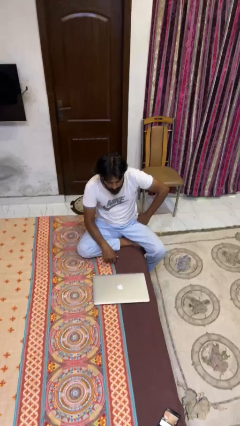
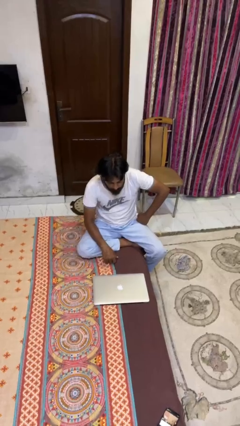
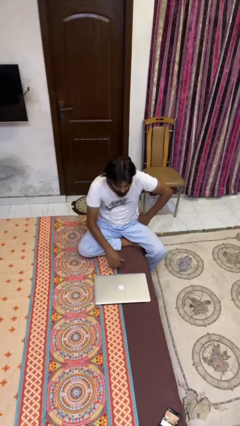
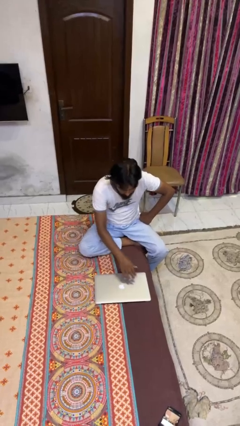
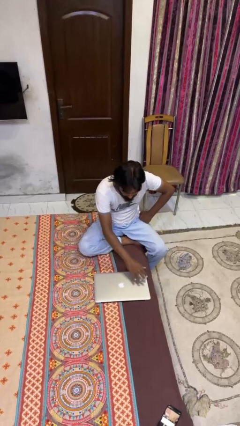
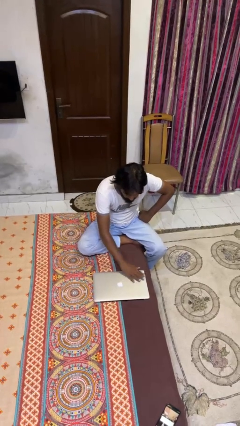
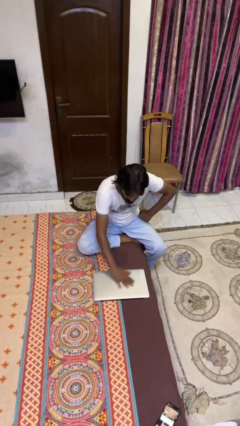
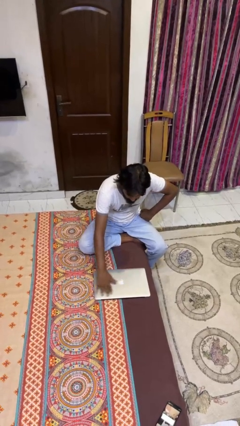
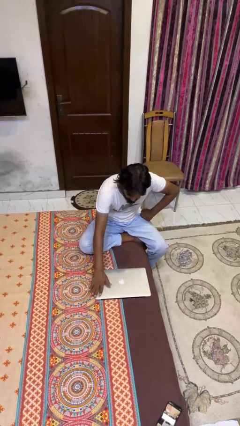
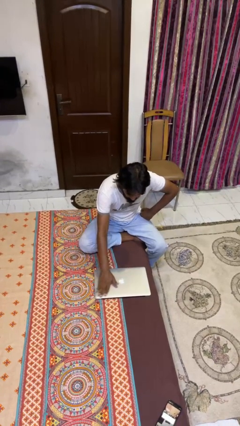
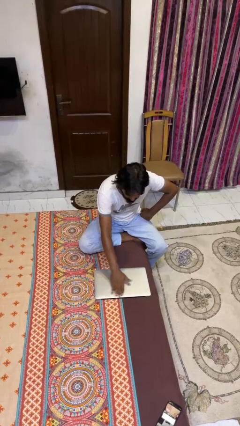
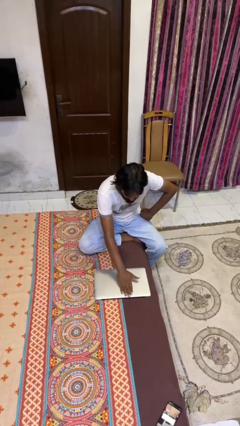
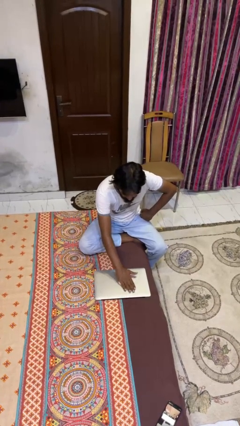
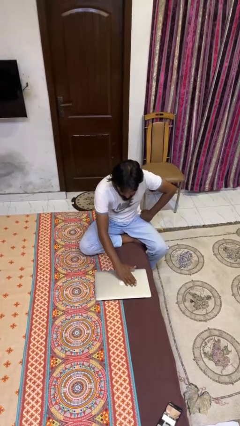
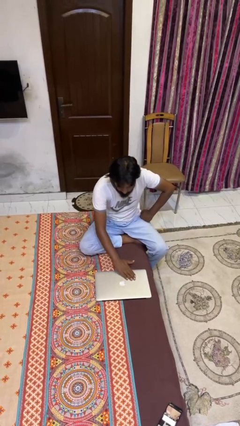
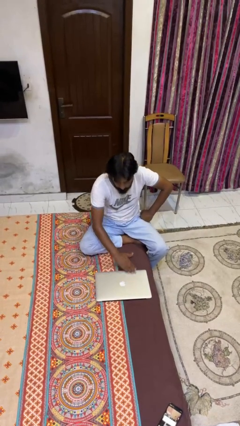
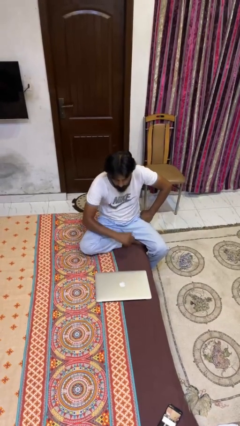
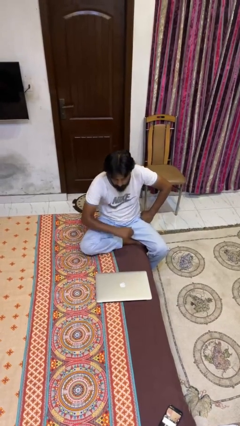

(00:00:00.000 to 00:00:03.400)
person waves hand over object

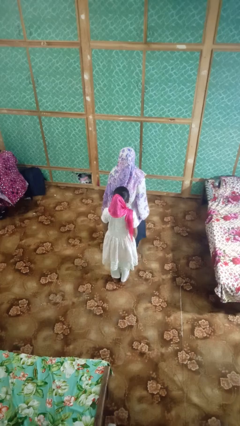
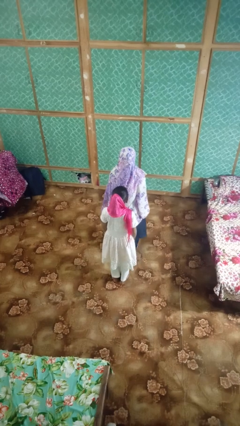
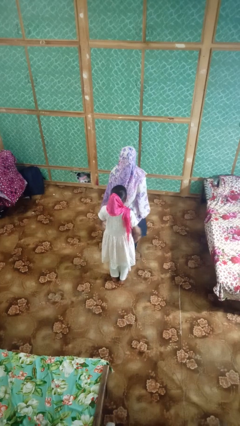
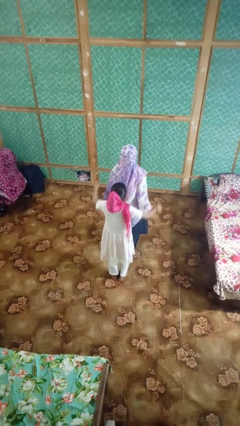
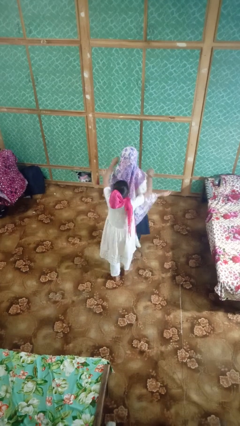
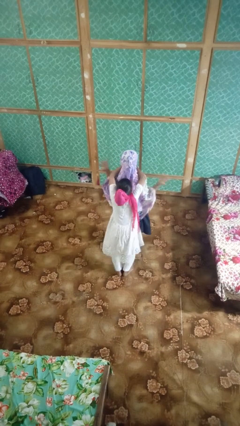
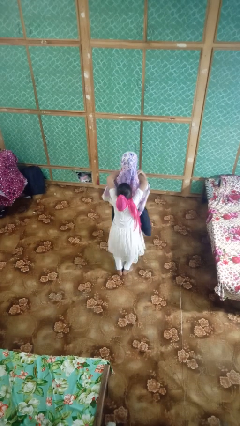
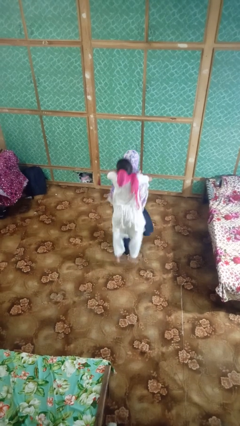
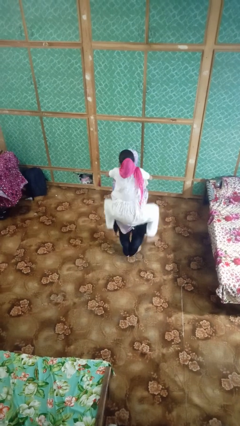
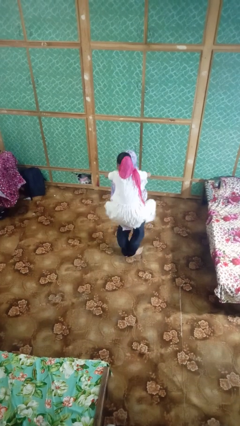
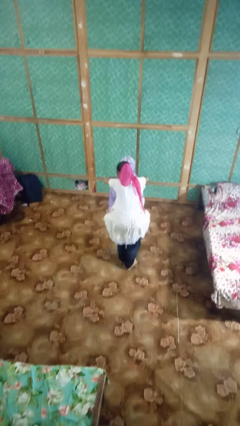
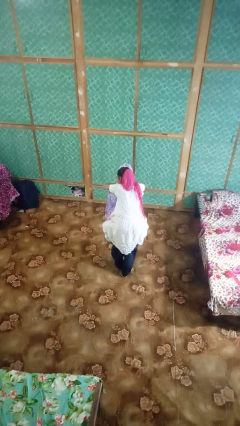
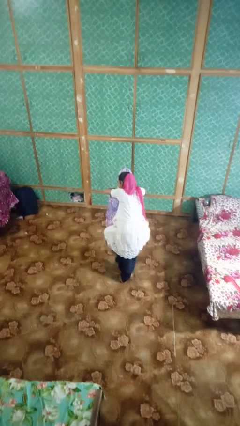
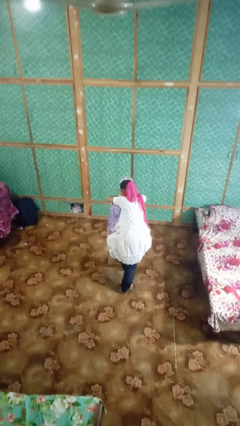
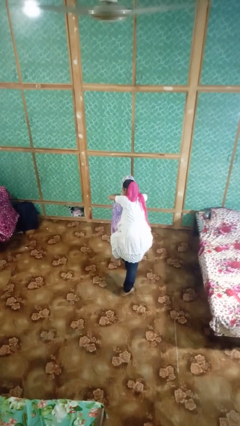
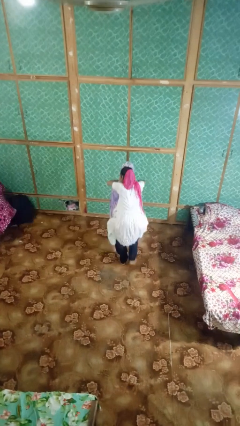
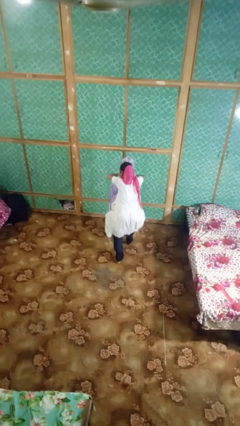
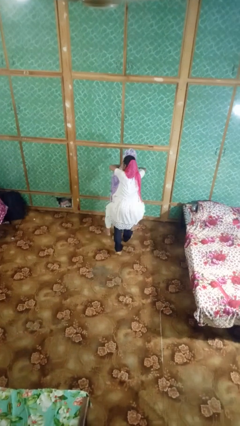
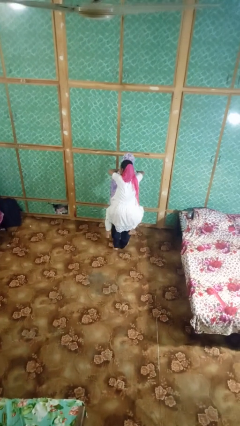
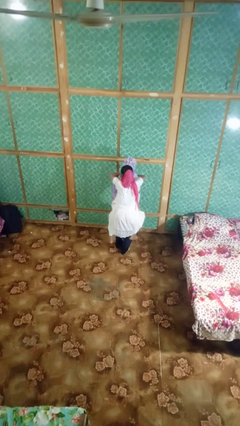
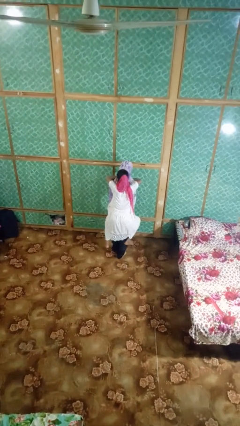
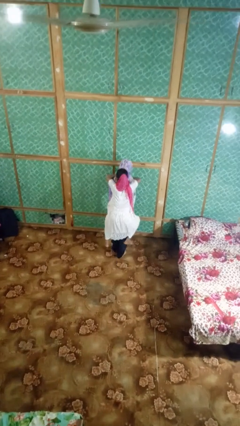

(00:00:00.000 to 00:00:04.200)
person carries person on back

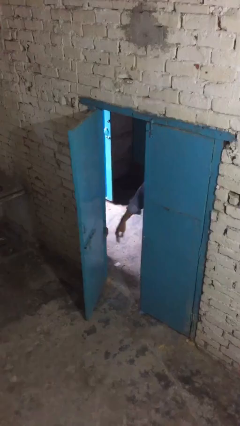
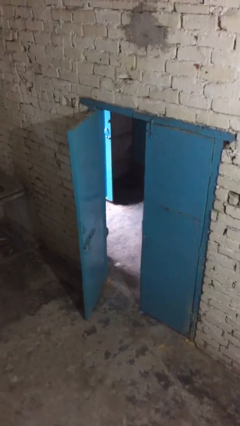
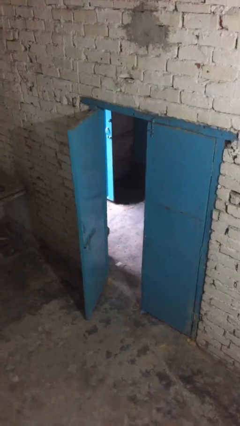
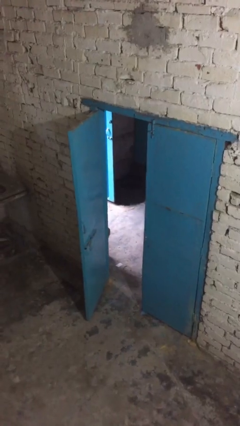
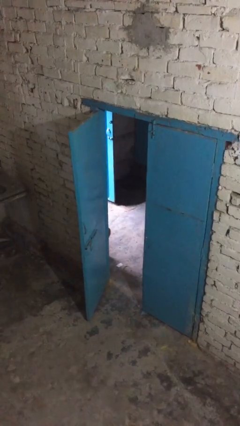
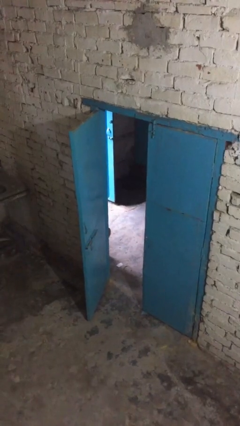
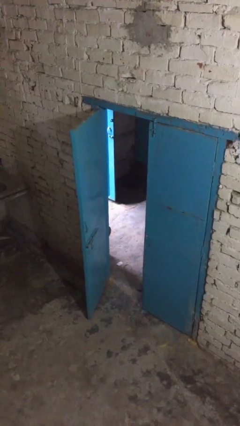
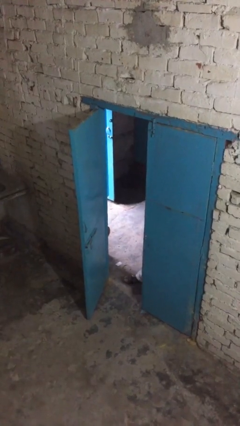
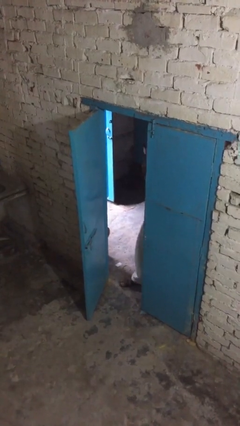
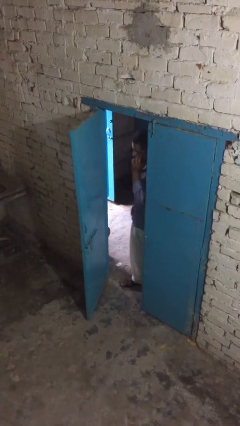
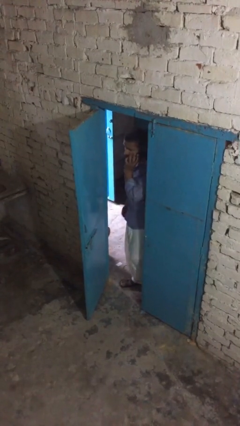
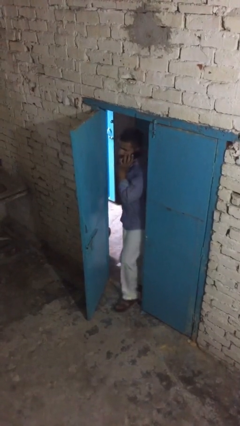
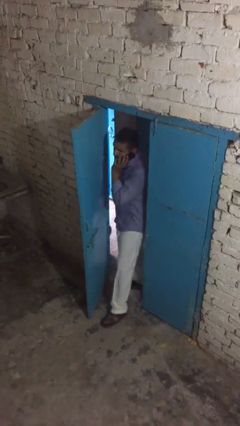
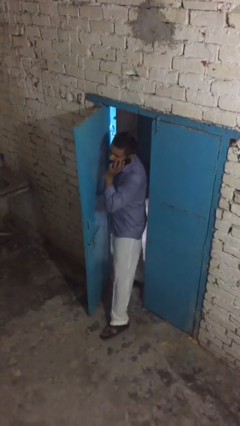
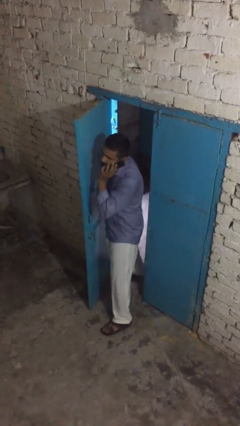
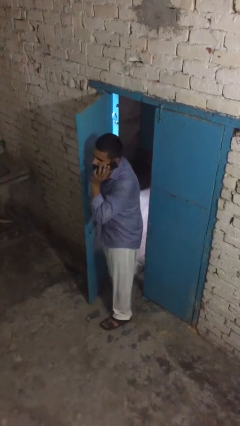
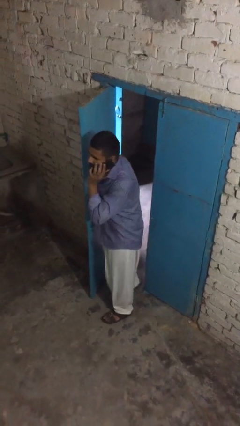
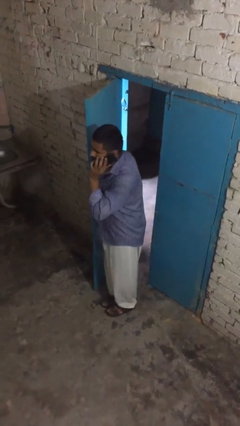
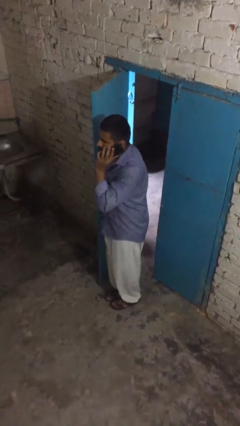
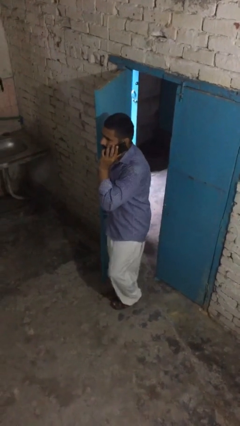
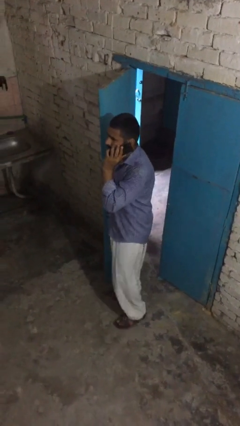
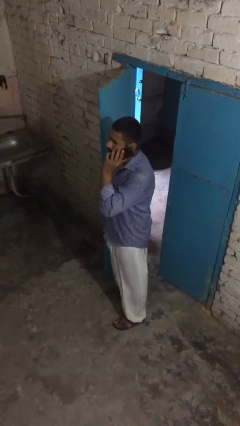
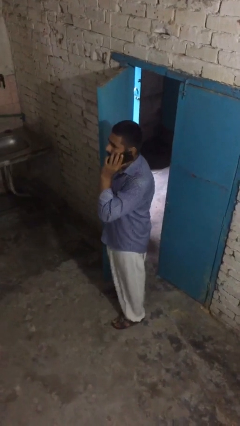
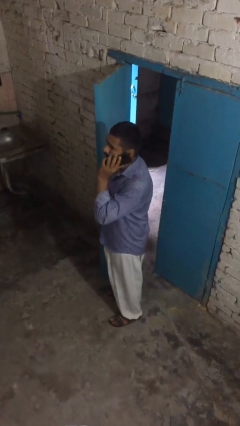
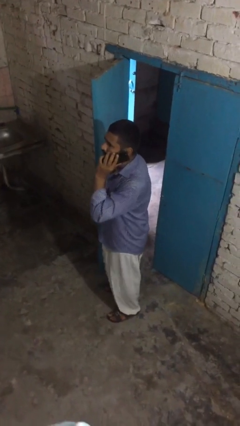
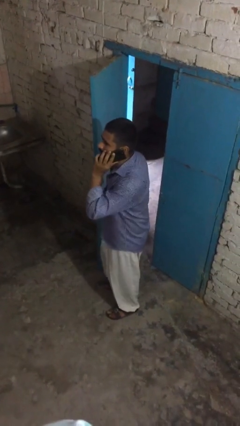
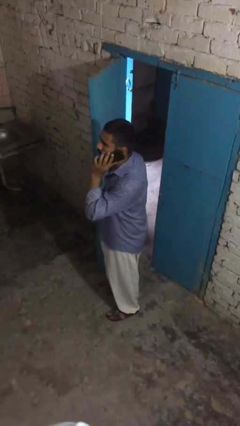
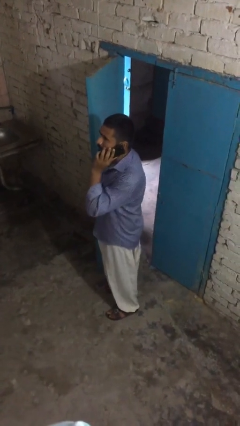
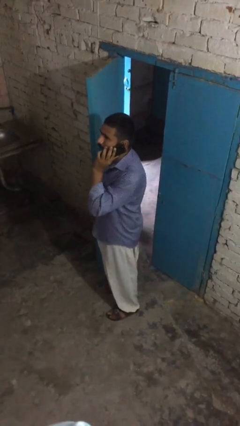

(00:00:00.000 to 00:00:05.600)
person enters scene through structure

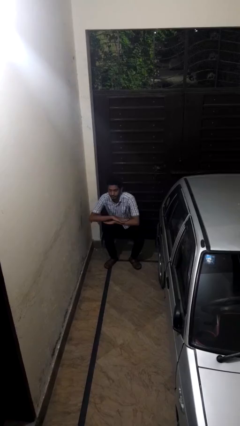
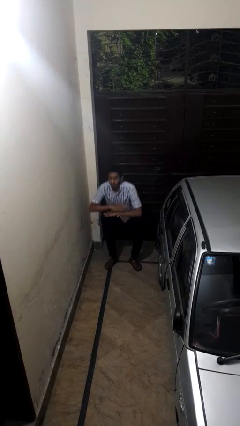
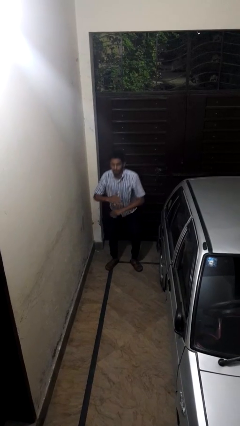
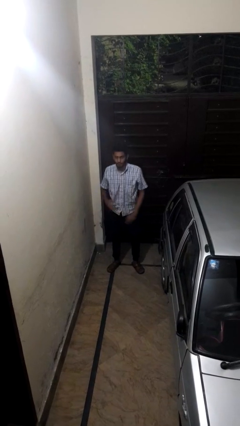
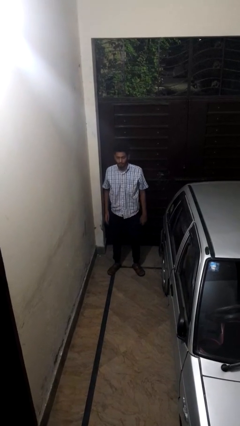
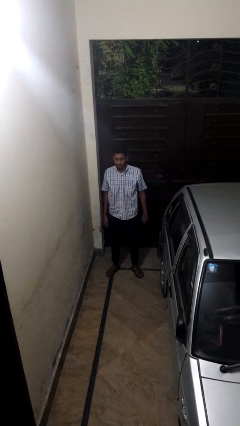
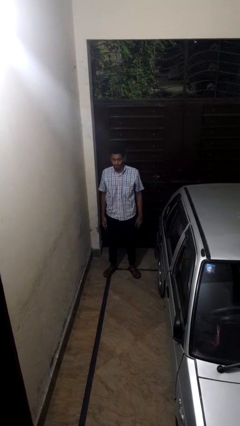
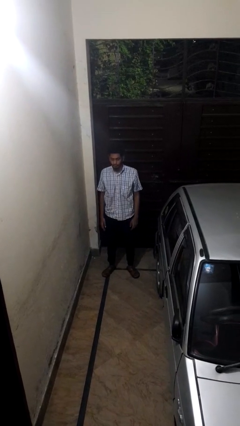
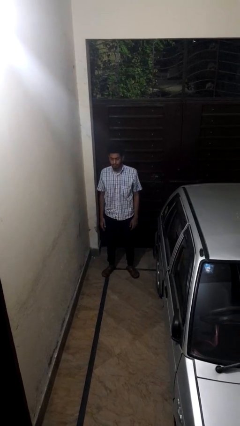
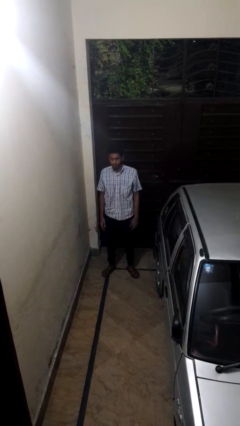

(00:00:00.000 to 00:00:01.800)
person stands up

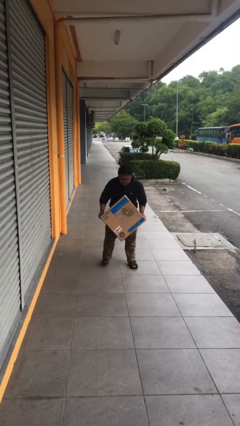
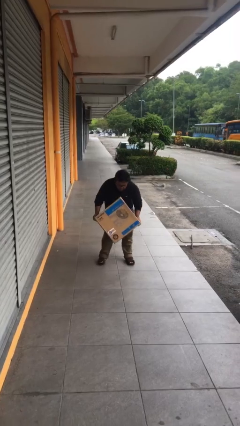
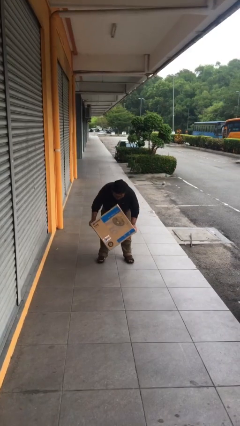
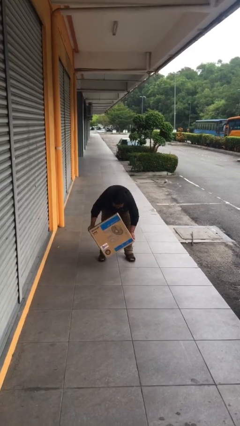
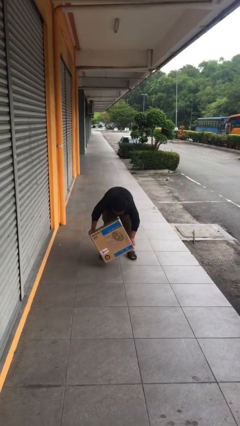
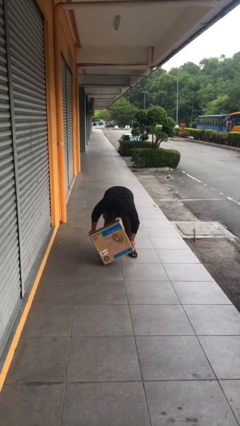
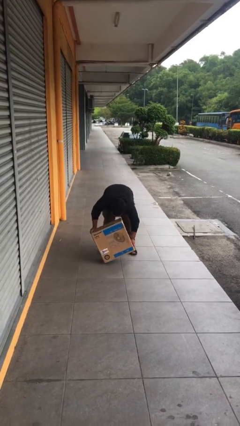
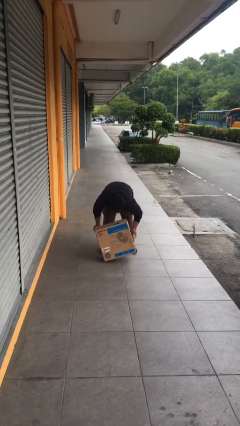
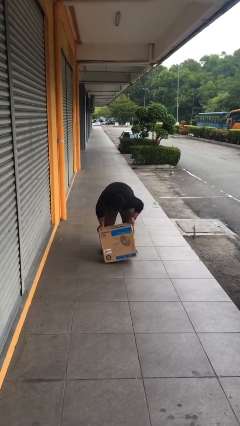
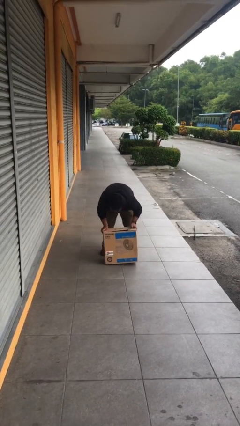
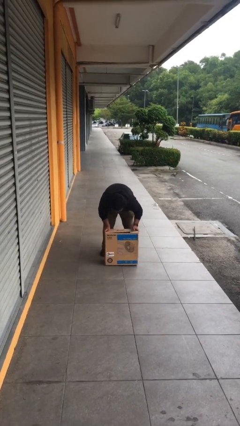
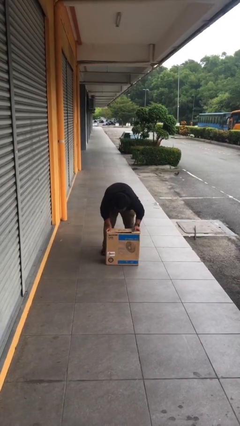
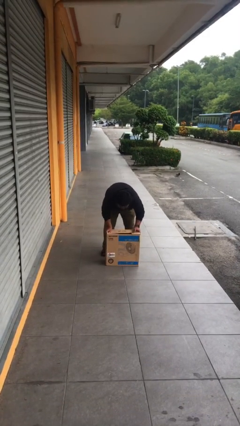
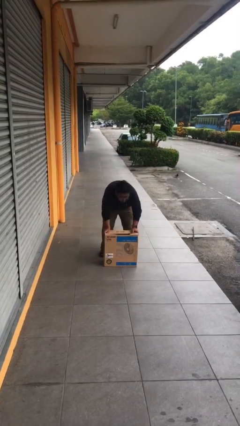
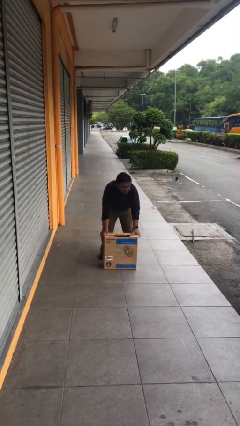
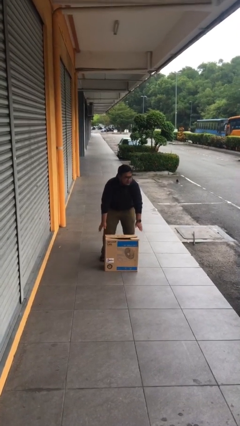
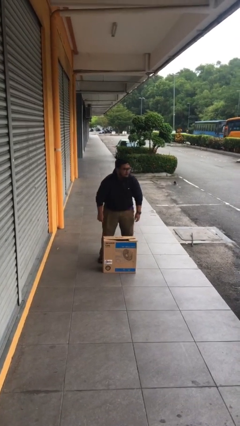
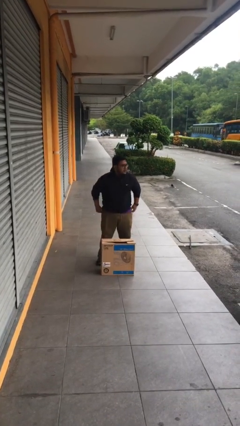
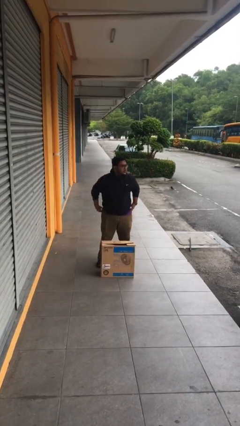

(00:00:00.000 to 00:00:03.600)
person puts down object on floor
